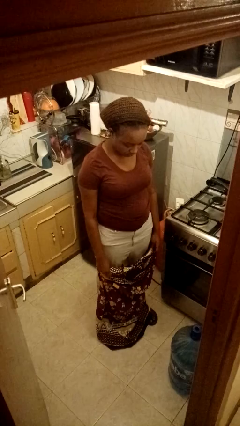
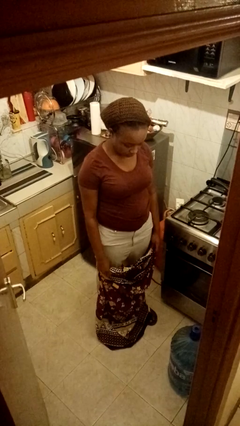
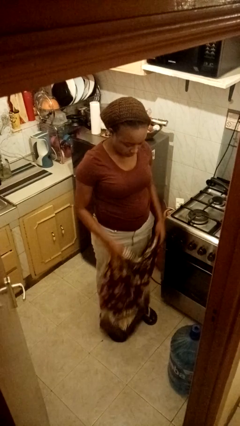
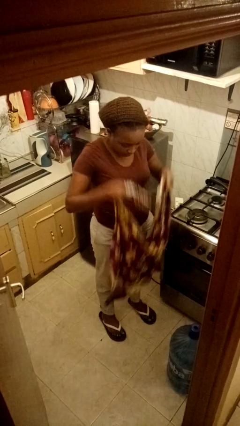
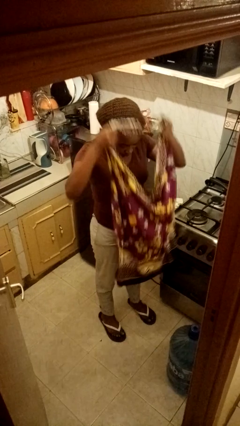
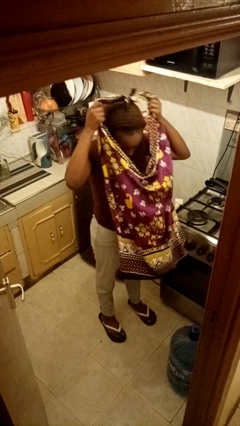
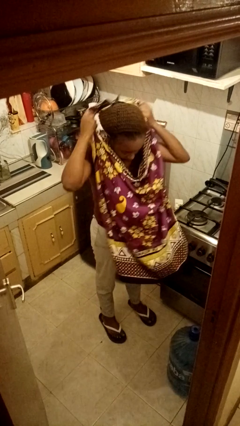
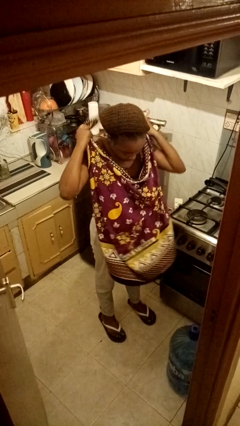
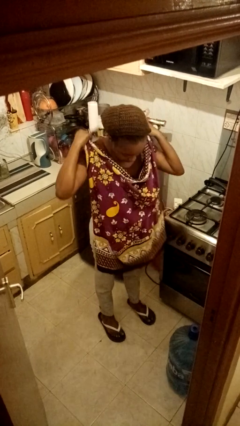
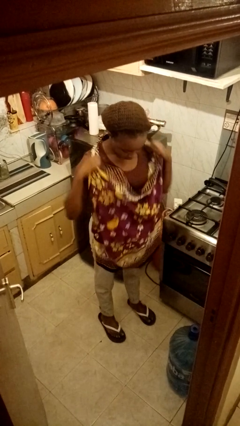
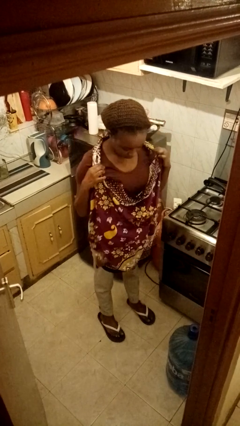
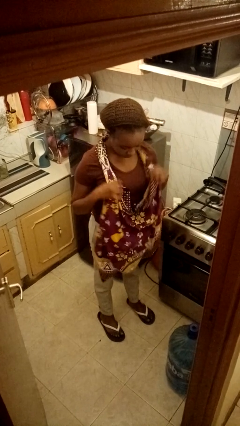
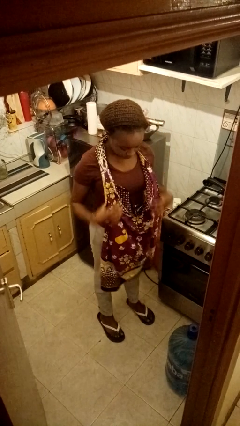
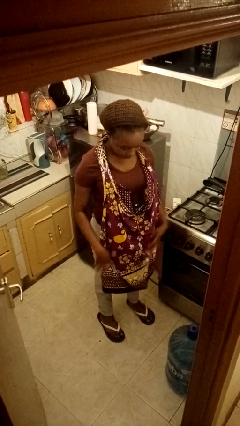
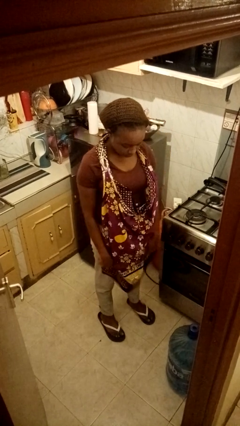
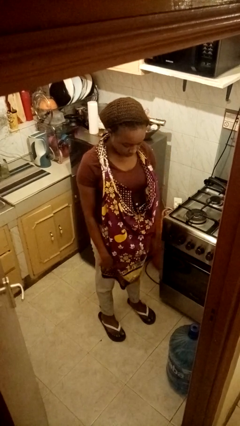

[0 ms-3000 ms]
person puts on apron

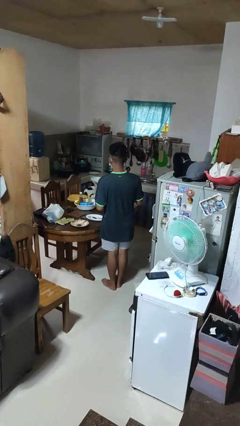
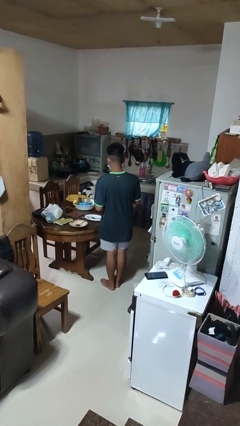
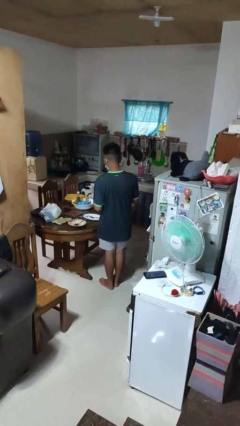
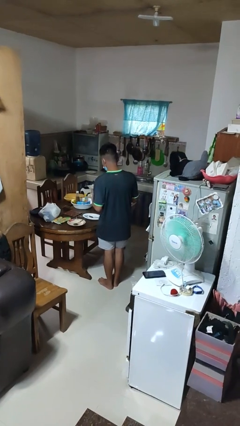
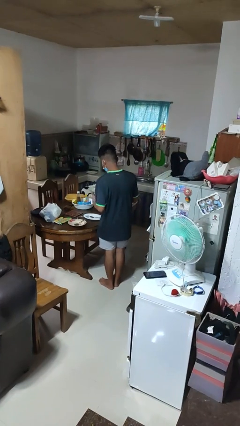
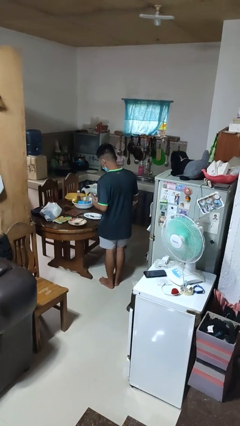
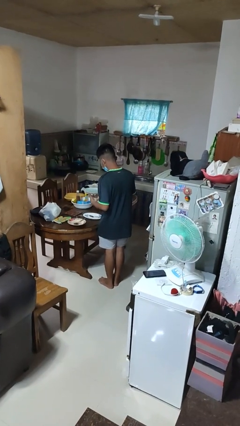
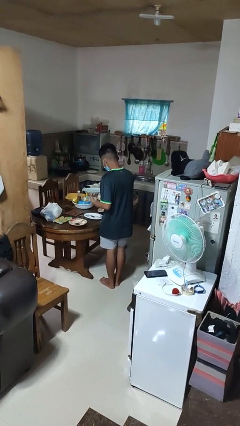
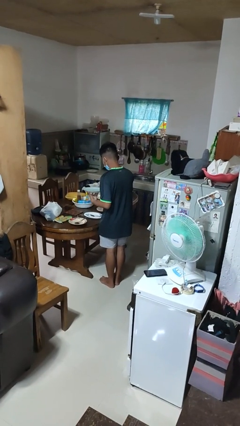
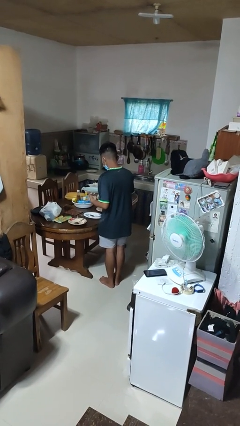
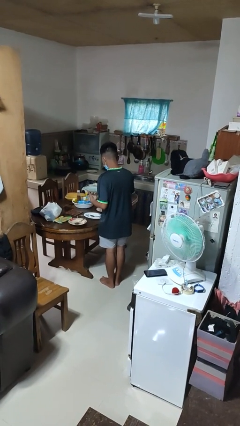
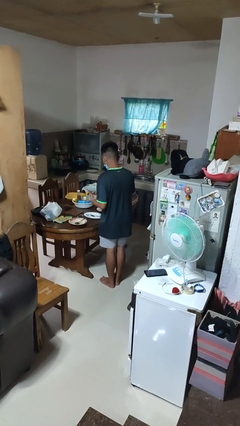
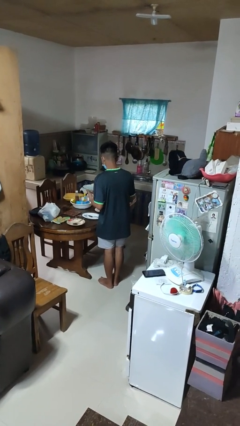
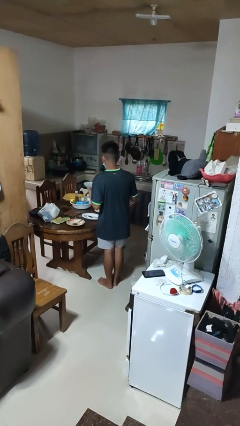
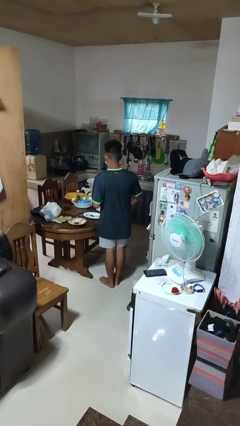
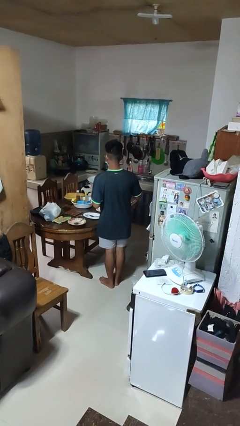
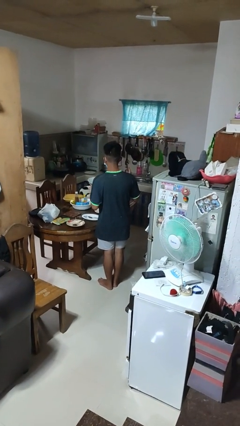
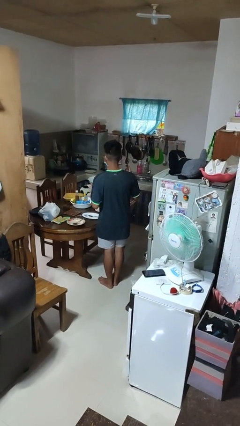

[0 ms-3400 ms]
person sets table

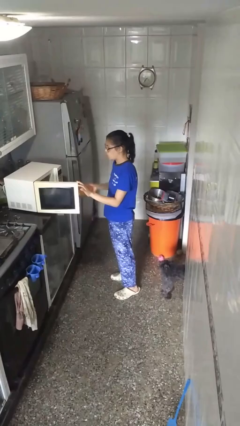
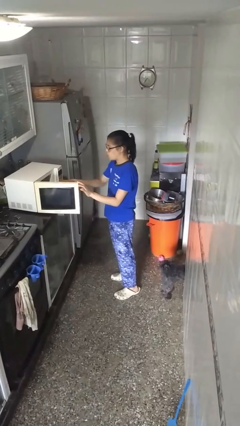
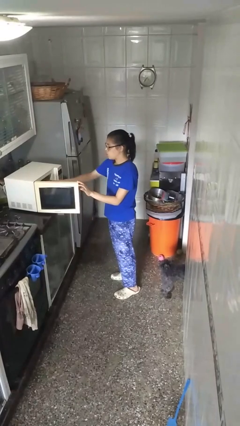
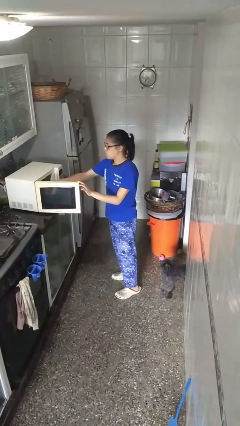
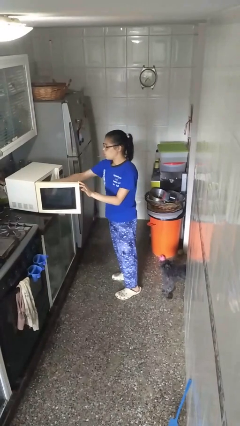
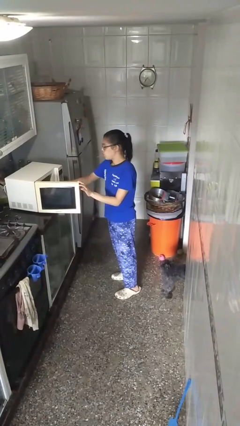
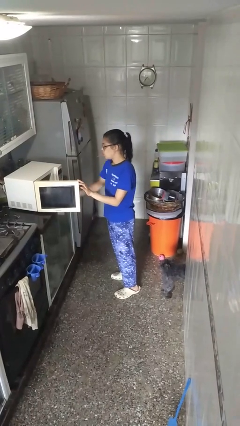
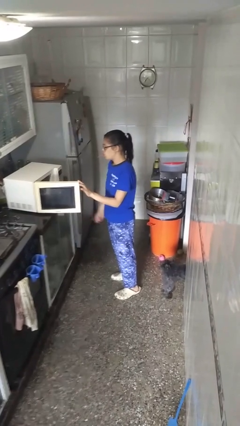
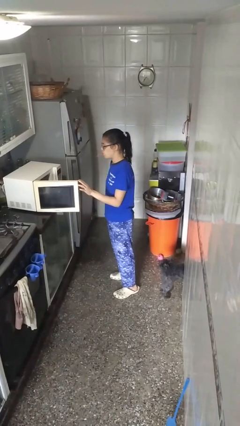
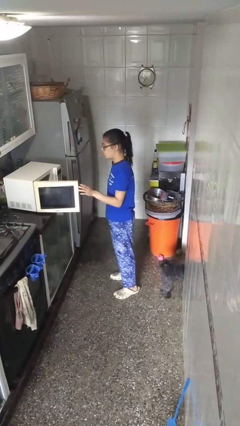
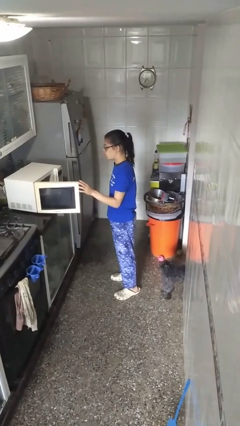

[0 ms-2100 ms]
person puts object into microwave

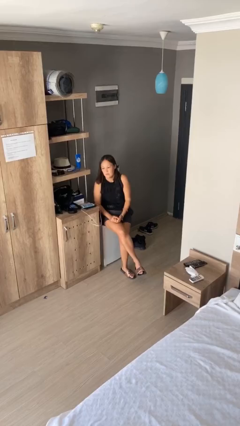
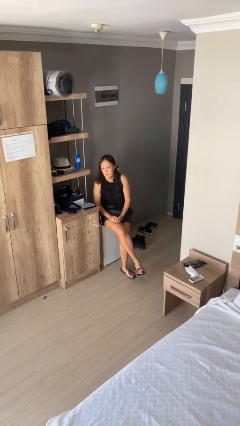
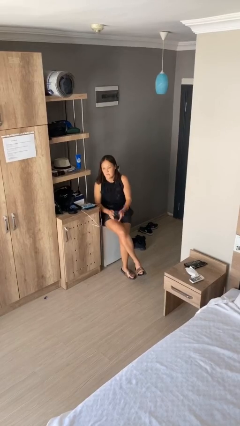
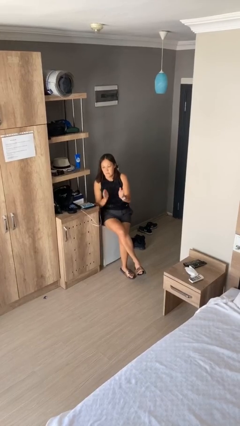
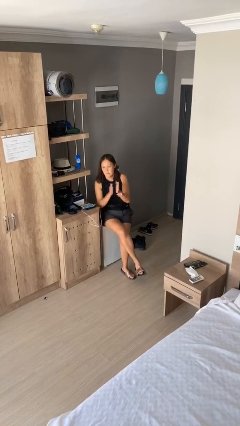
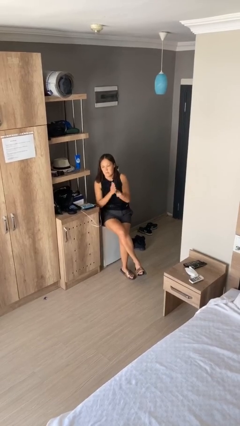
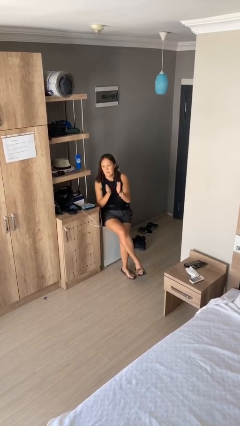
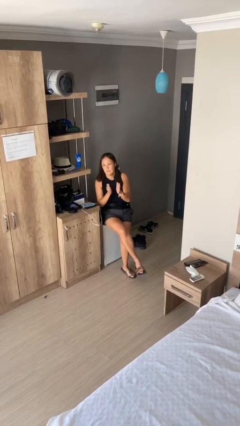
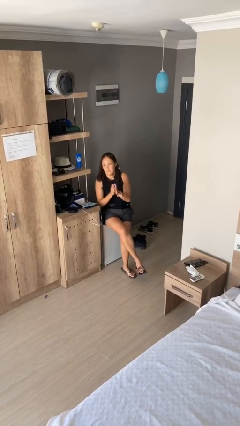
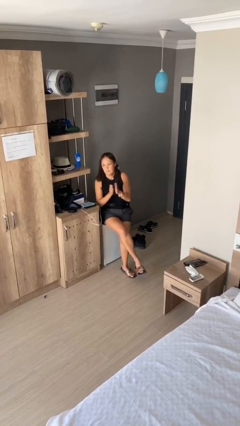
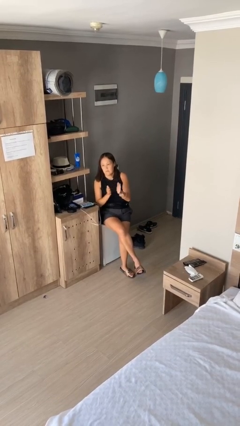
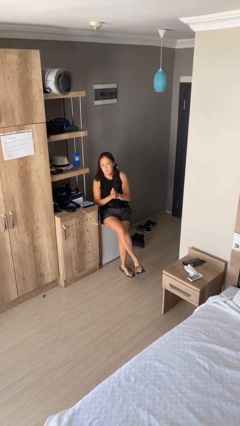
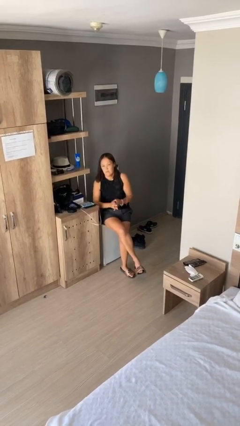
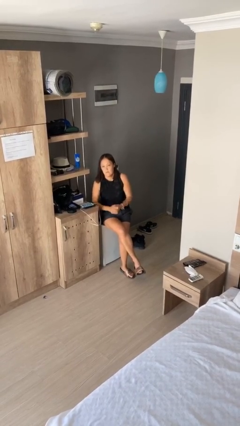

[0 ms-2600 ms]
person claps hands

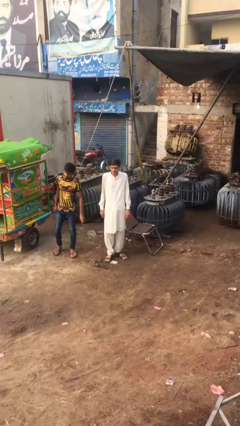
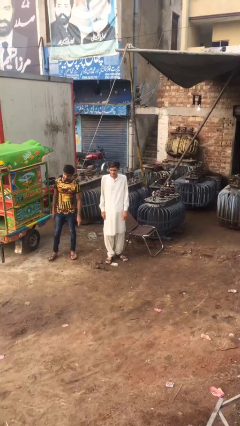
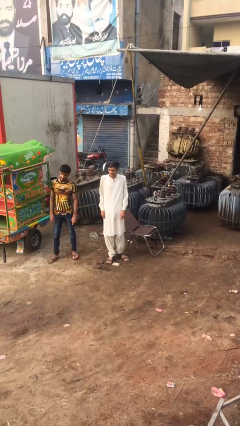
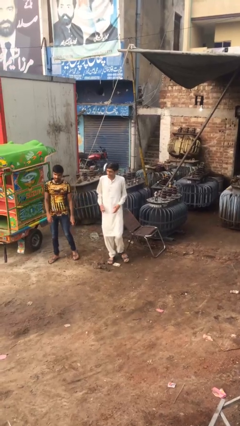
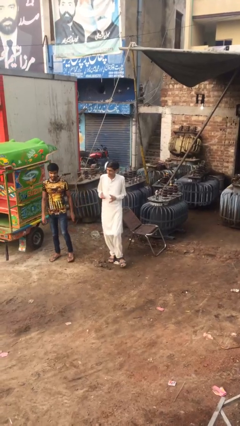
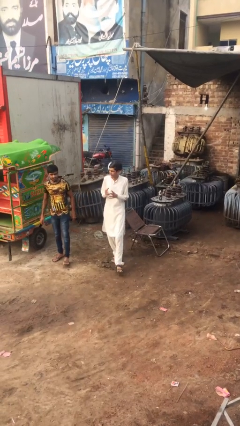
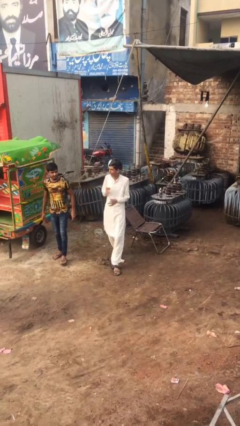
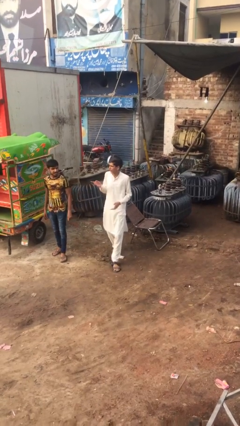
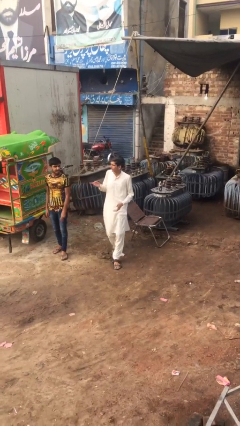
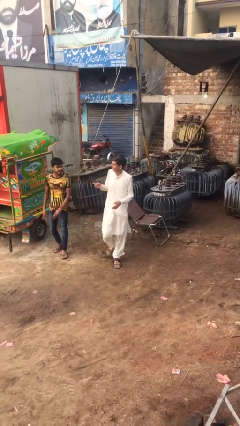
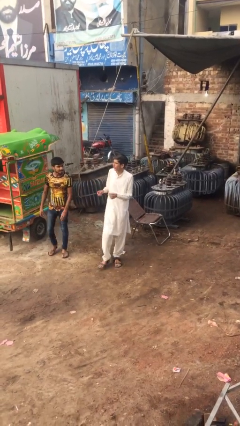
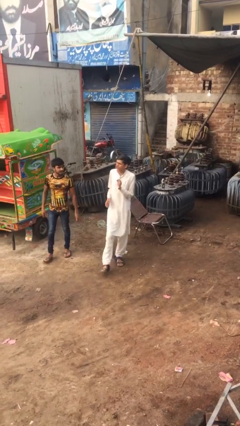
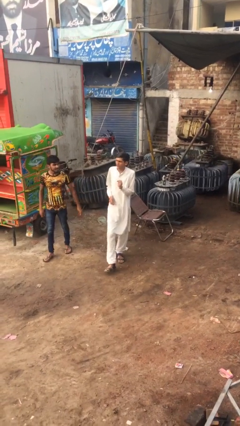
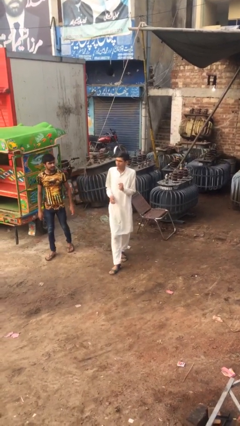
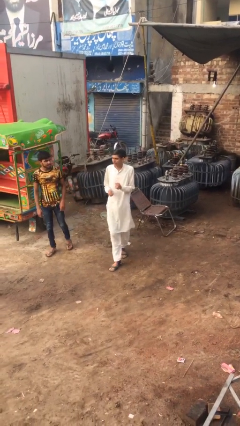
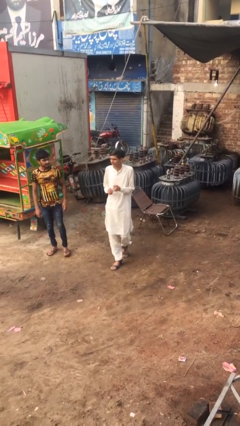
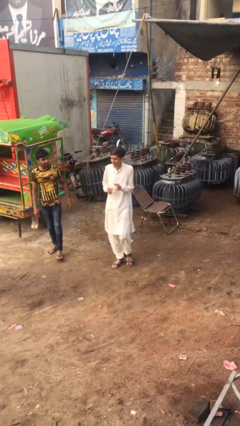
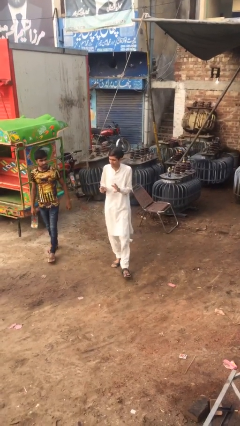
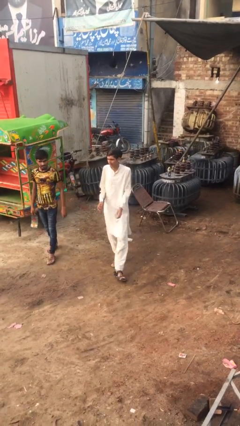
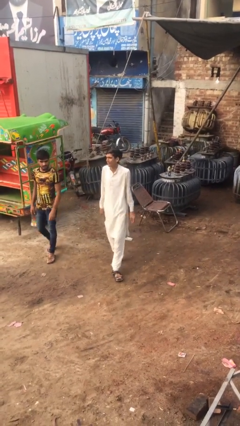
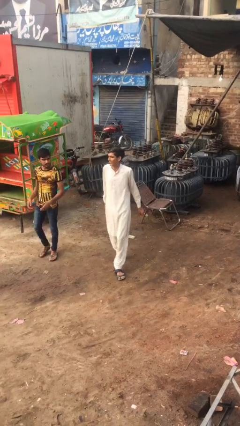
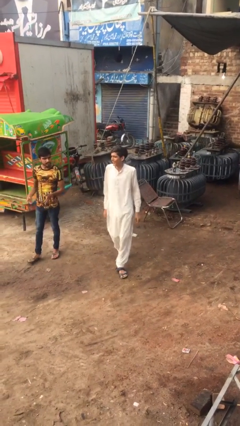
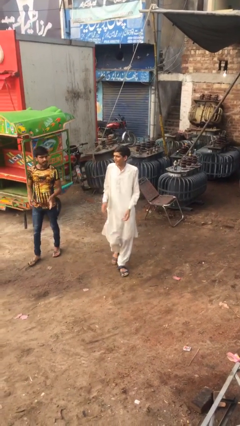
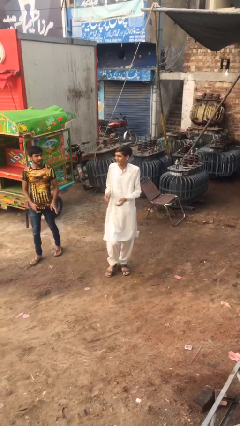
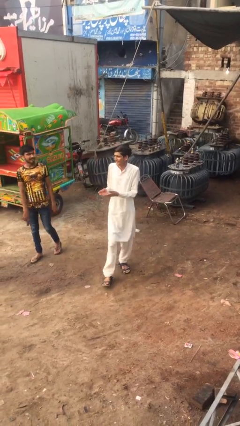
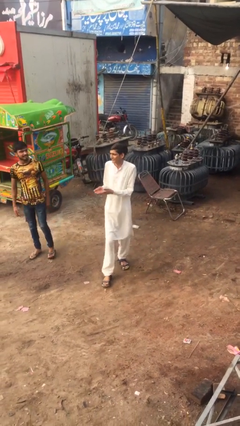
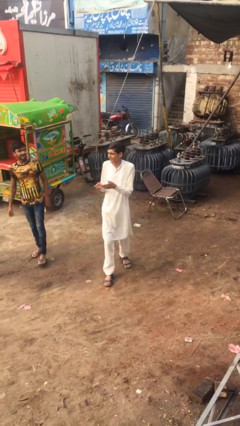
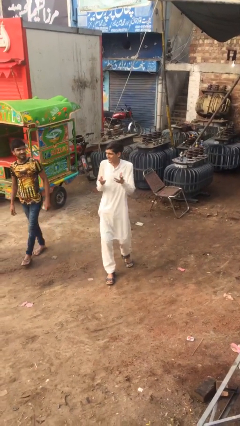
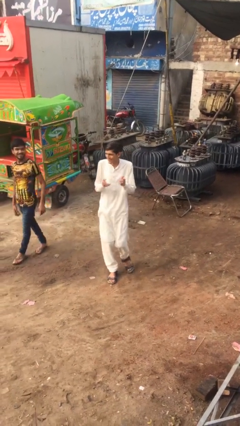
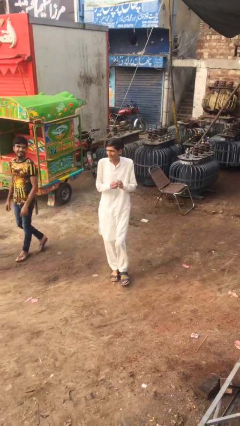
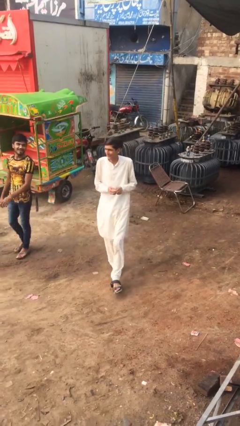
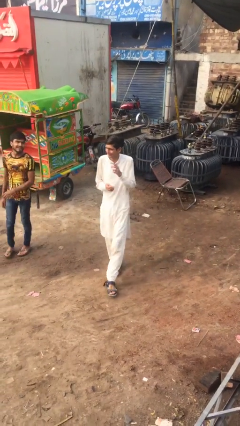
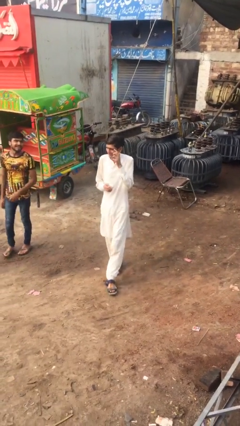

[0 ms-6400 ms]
person talks to person
